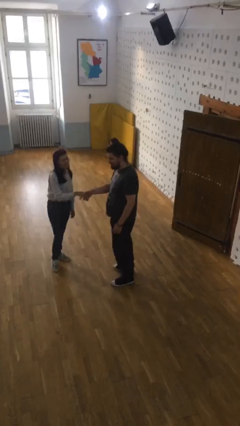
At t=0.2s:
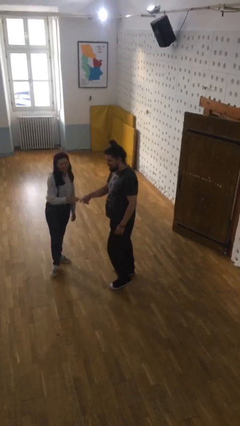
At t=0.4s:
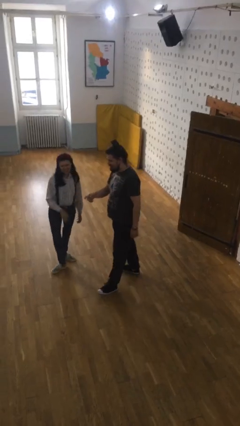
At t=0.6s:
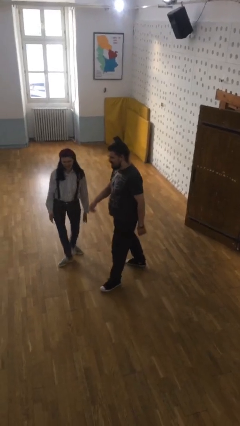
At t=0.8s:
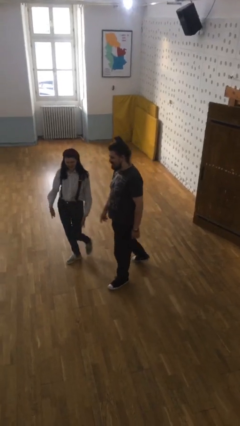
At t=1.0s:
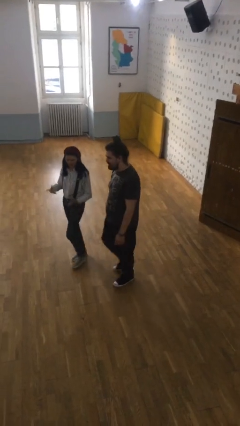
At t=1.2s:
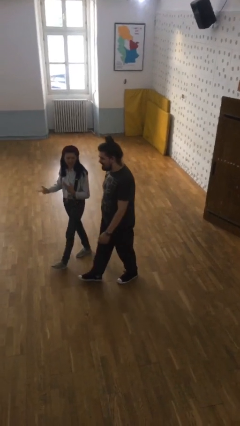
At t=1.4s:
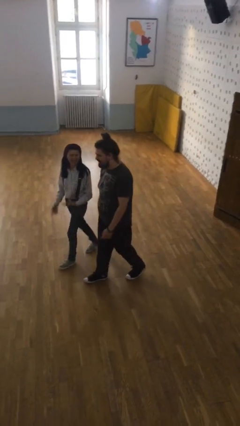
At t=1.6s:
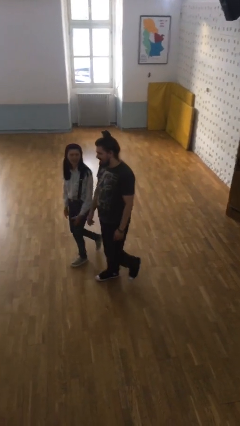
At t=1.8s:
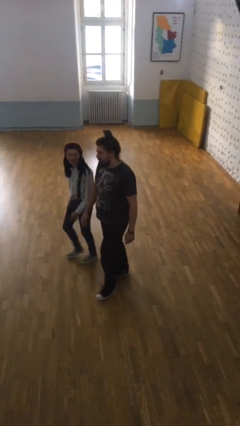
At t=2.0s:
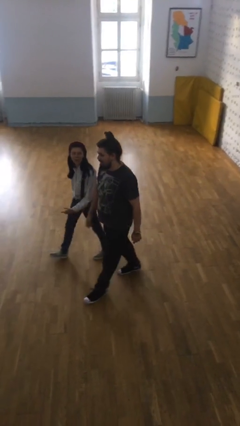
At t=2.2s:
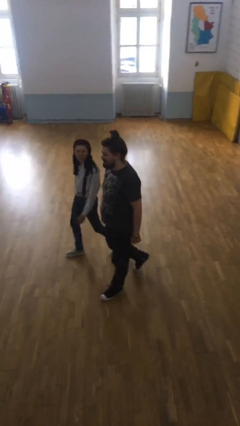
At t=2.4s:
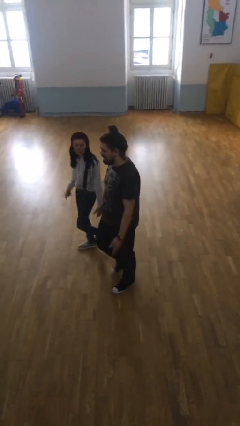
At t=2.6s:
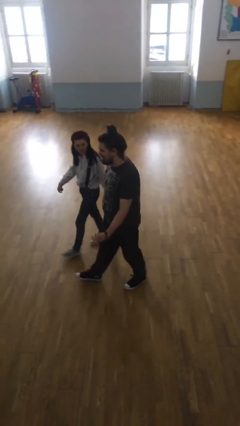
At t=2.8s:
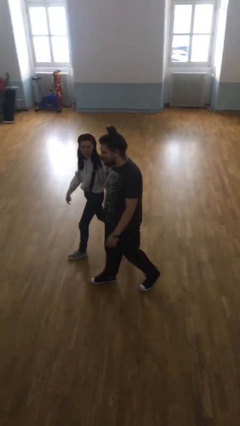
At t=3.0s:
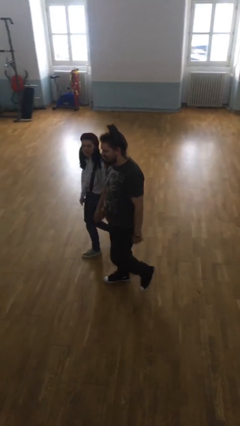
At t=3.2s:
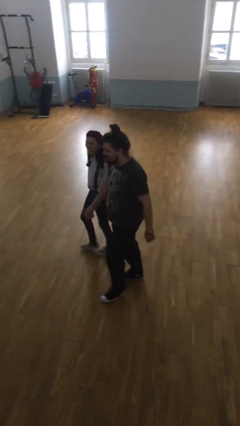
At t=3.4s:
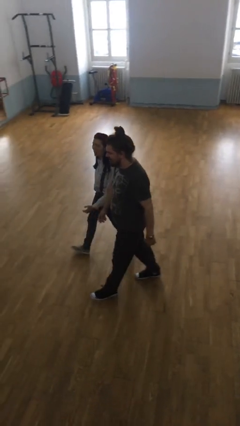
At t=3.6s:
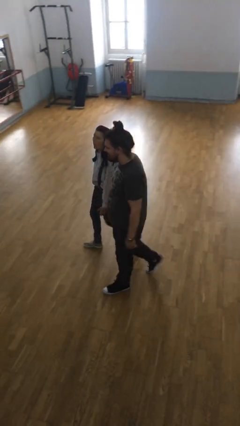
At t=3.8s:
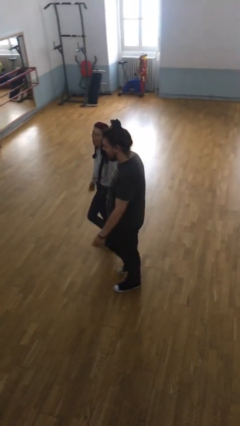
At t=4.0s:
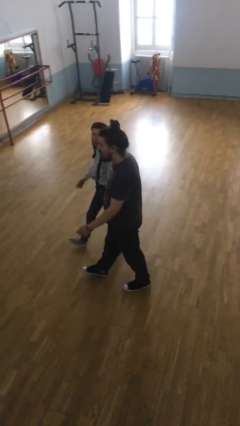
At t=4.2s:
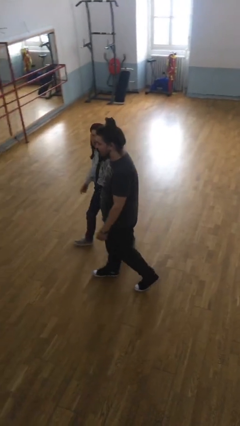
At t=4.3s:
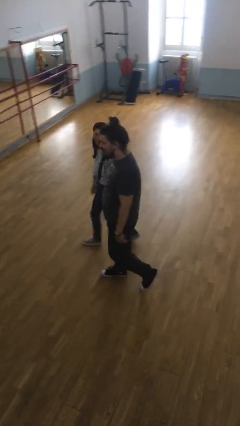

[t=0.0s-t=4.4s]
person talks to person

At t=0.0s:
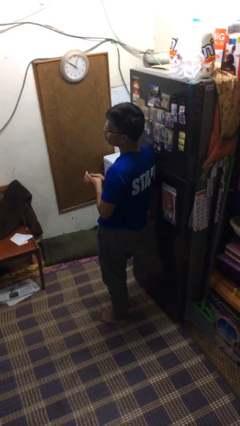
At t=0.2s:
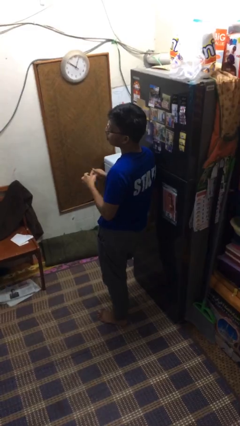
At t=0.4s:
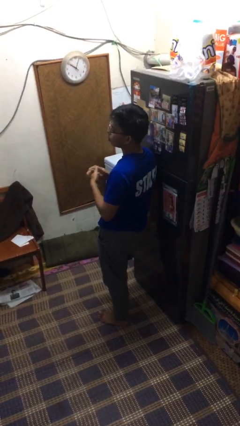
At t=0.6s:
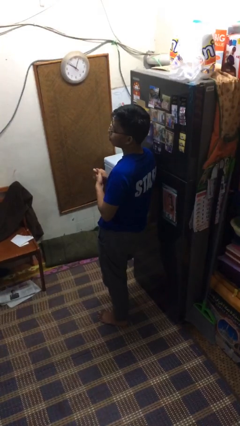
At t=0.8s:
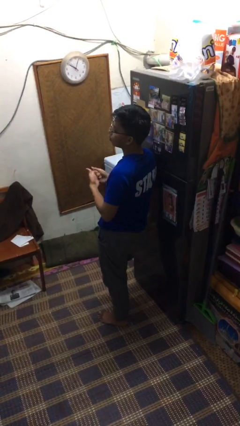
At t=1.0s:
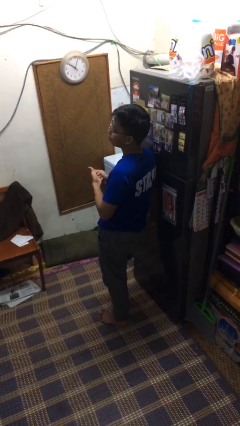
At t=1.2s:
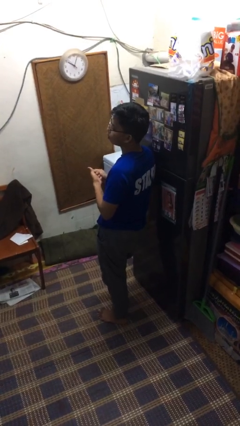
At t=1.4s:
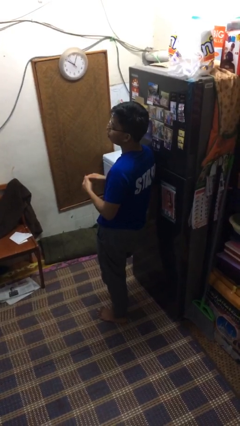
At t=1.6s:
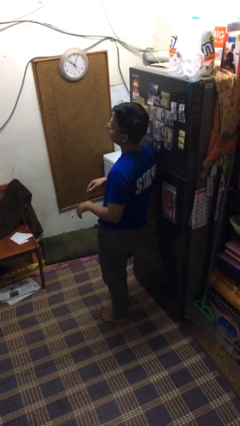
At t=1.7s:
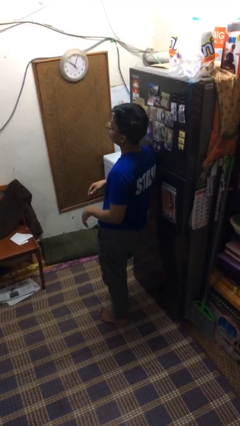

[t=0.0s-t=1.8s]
person cracks knuckles

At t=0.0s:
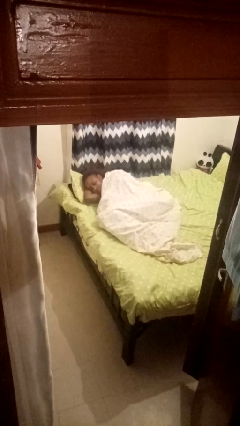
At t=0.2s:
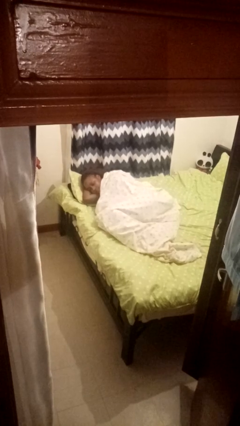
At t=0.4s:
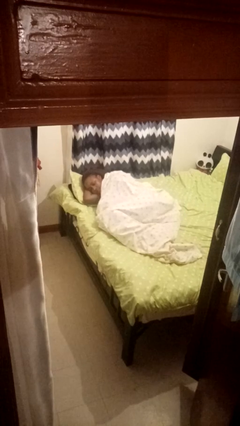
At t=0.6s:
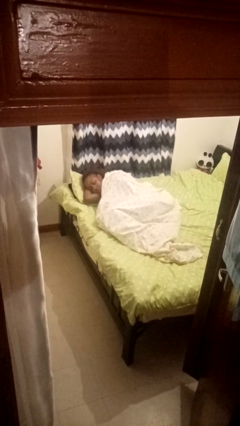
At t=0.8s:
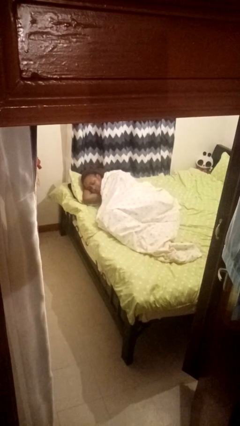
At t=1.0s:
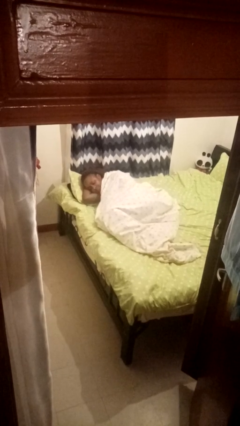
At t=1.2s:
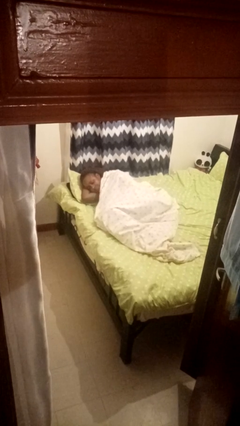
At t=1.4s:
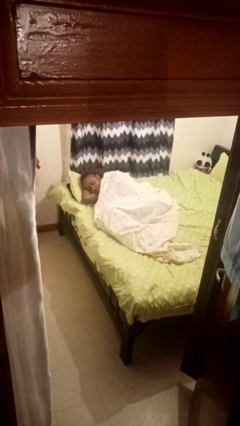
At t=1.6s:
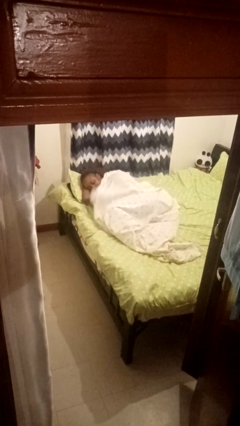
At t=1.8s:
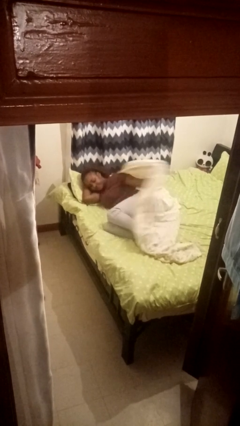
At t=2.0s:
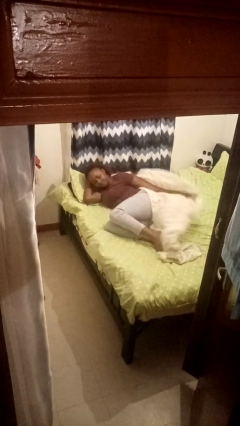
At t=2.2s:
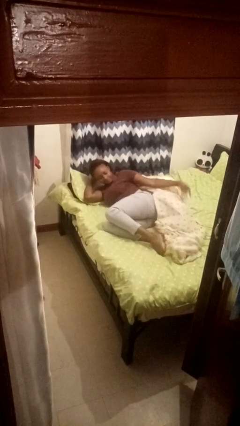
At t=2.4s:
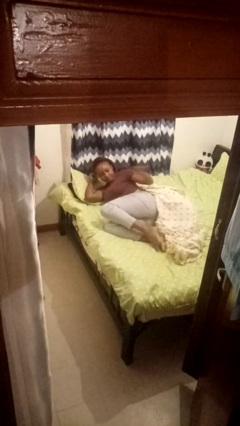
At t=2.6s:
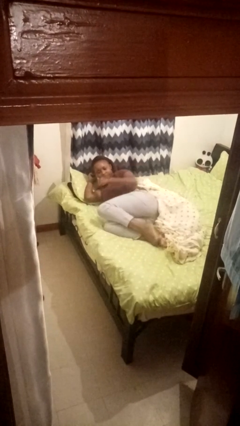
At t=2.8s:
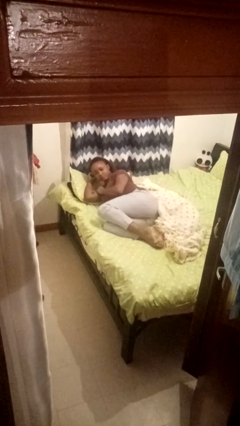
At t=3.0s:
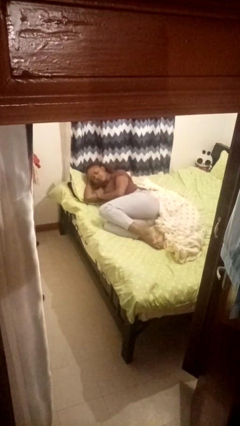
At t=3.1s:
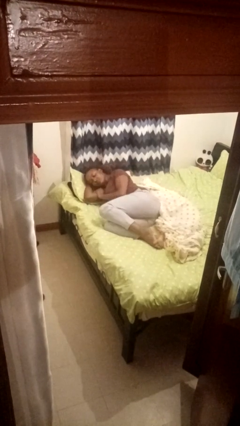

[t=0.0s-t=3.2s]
person uncovers with bedsheets

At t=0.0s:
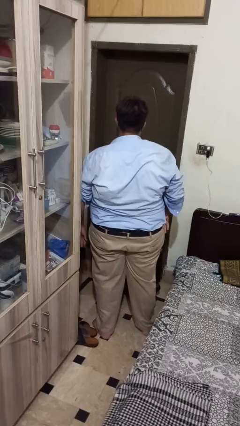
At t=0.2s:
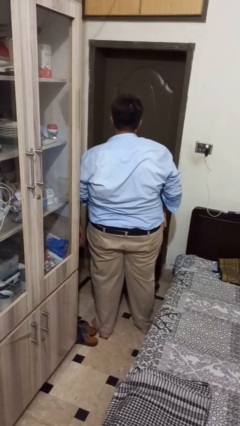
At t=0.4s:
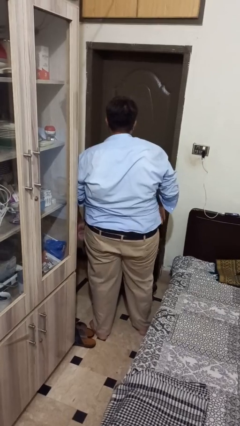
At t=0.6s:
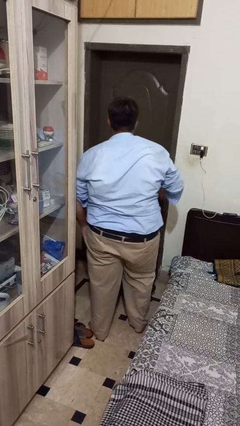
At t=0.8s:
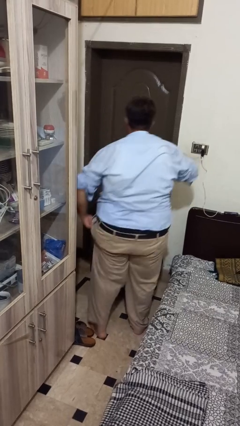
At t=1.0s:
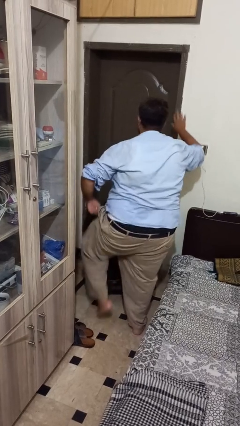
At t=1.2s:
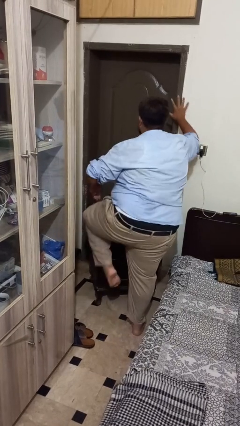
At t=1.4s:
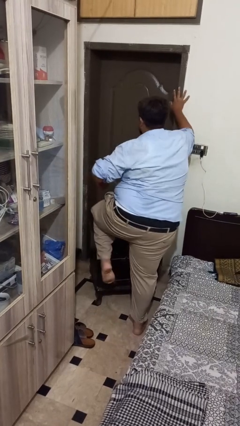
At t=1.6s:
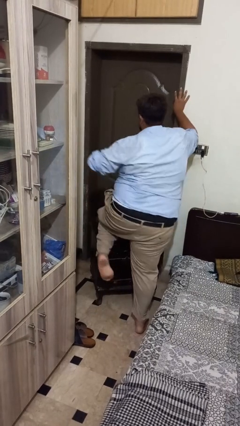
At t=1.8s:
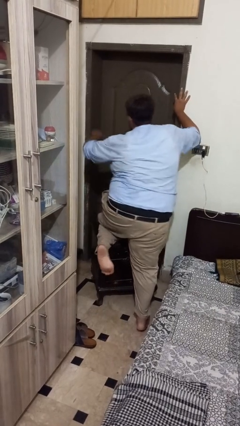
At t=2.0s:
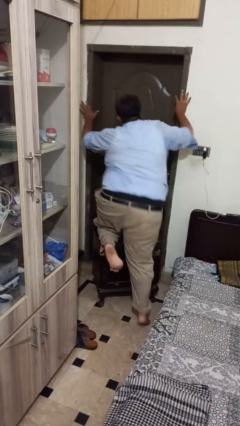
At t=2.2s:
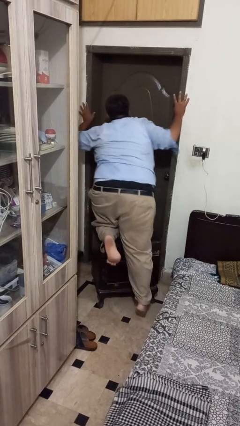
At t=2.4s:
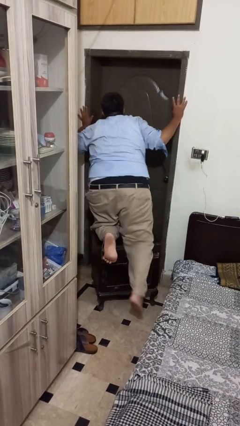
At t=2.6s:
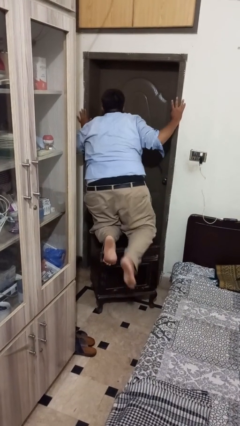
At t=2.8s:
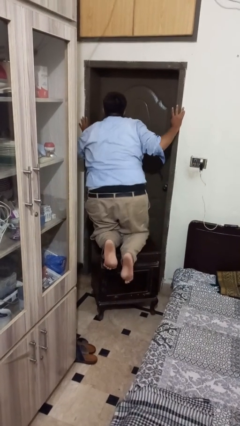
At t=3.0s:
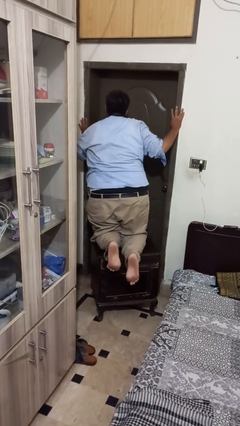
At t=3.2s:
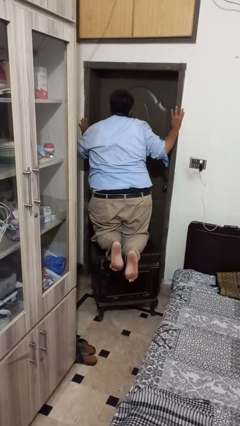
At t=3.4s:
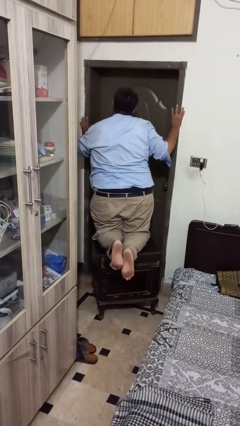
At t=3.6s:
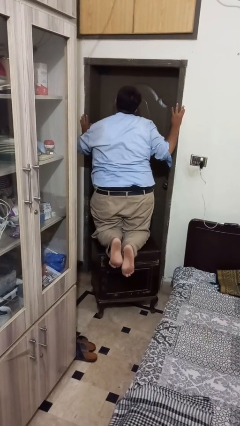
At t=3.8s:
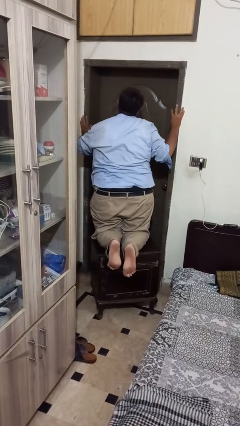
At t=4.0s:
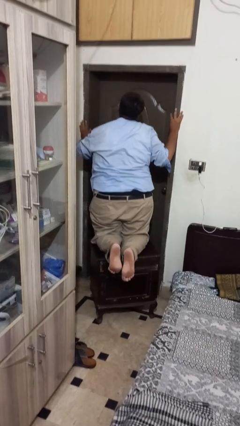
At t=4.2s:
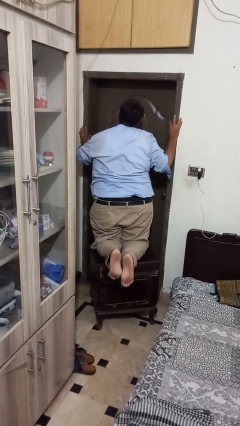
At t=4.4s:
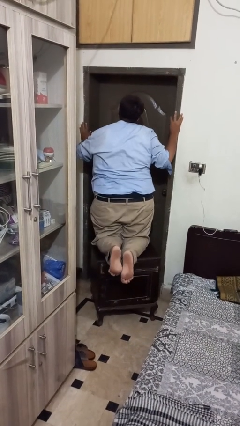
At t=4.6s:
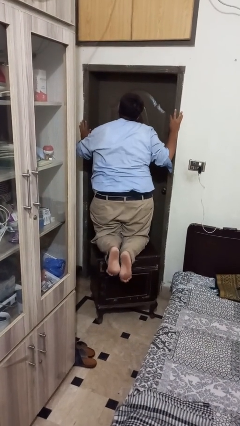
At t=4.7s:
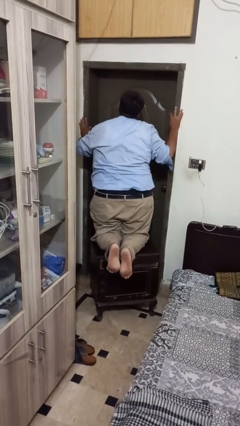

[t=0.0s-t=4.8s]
person climbs on table

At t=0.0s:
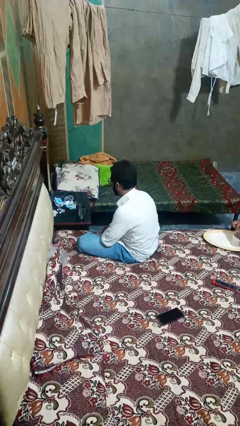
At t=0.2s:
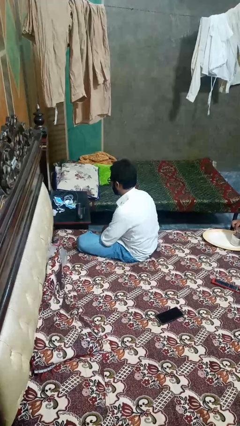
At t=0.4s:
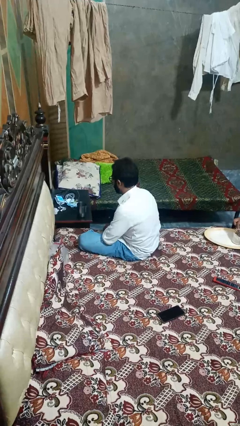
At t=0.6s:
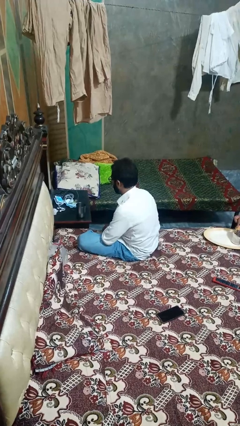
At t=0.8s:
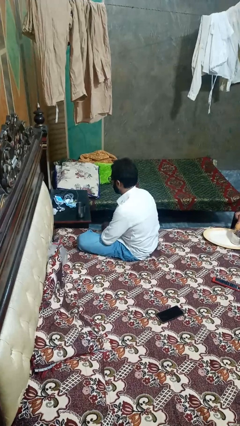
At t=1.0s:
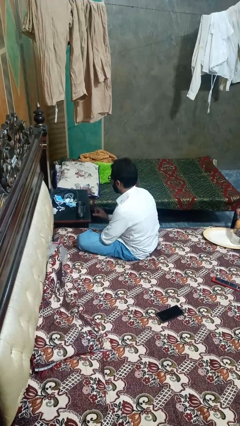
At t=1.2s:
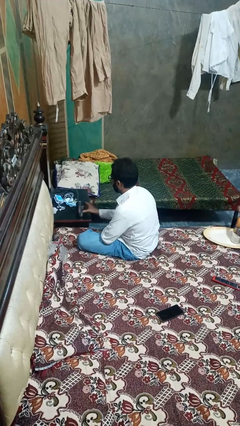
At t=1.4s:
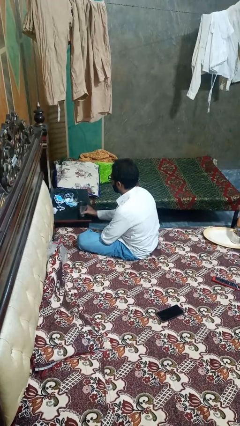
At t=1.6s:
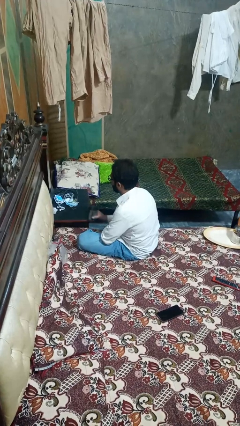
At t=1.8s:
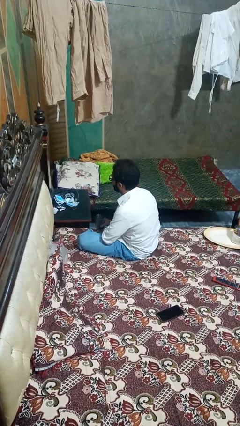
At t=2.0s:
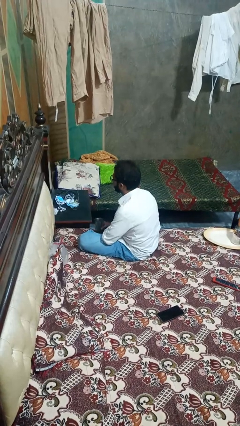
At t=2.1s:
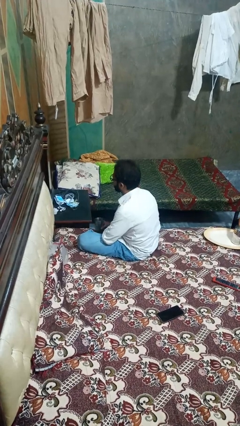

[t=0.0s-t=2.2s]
person picks up object from table

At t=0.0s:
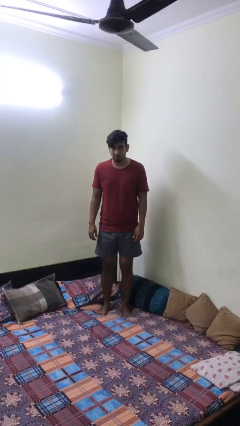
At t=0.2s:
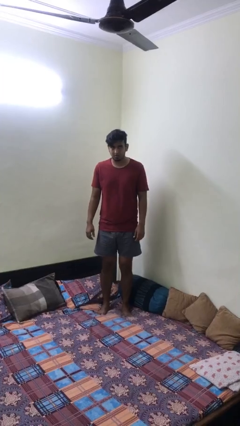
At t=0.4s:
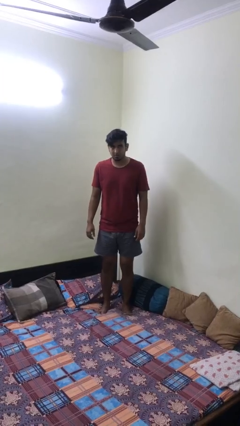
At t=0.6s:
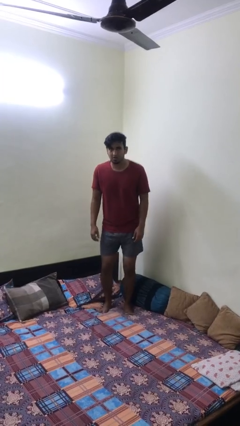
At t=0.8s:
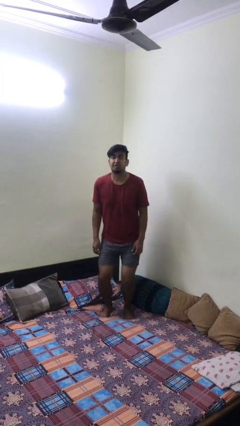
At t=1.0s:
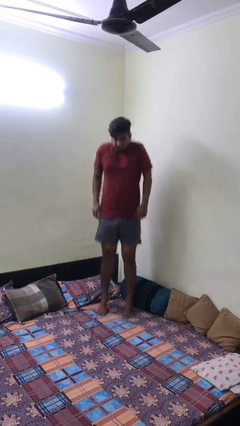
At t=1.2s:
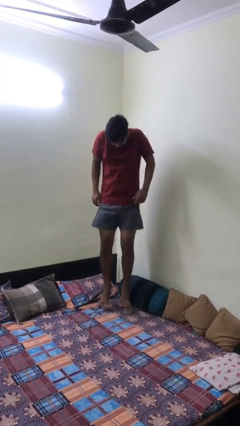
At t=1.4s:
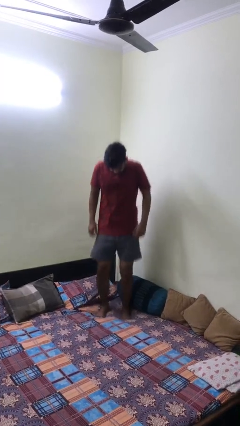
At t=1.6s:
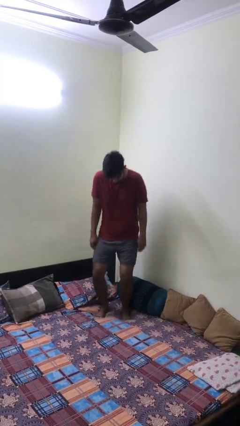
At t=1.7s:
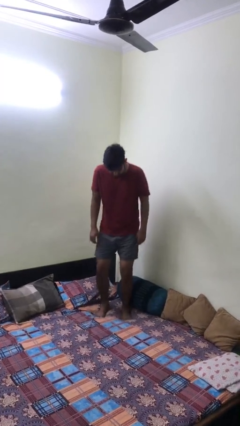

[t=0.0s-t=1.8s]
person jumps on bed
